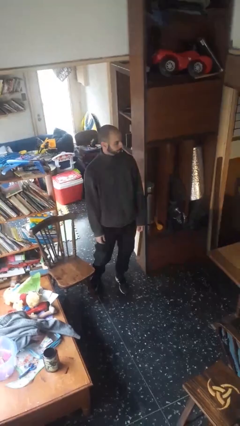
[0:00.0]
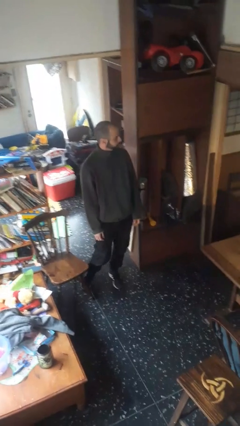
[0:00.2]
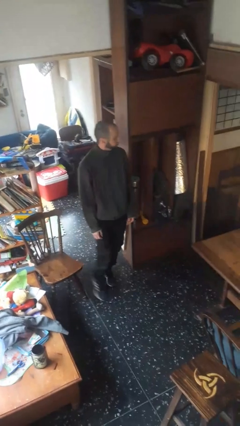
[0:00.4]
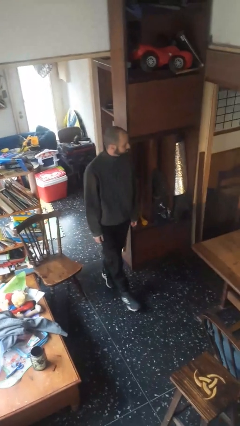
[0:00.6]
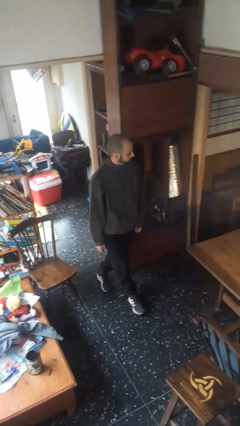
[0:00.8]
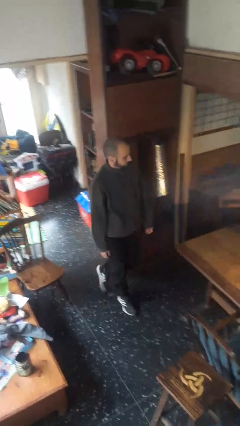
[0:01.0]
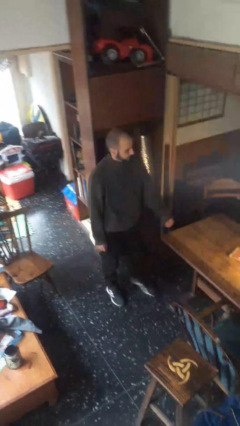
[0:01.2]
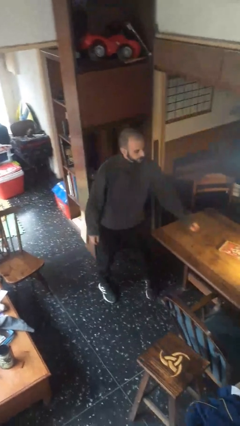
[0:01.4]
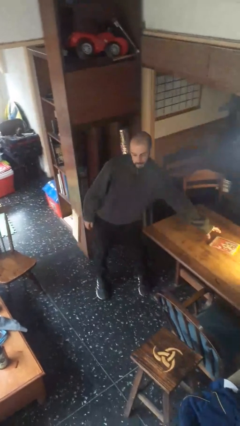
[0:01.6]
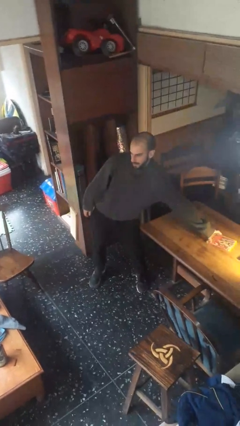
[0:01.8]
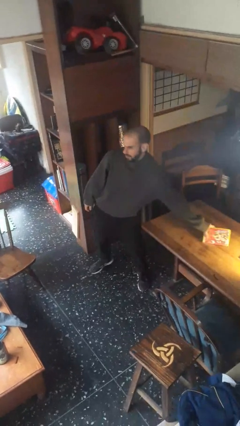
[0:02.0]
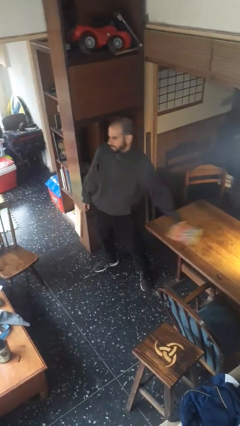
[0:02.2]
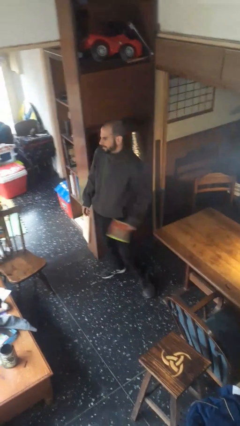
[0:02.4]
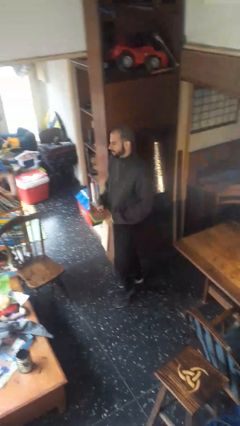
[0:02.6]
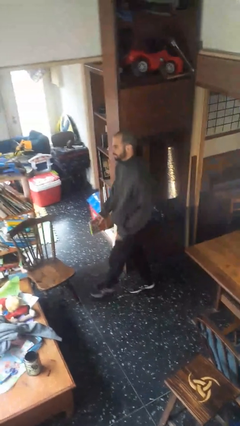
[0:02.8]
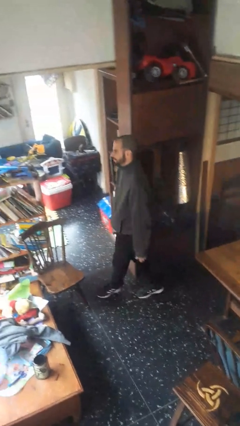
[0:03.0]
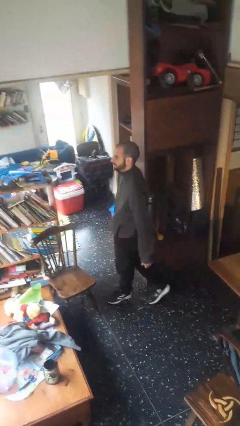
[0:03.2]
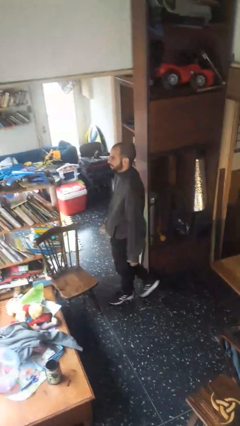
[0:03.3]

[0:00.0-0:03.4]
person picks up object from table

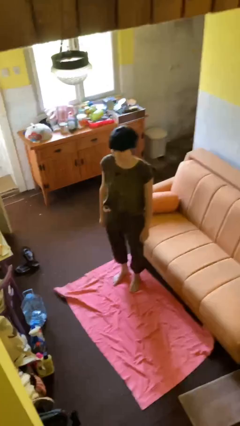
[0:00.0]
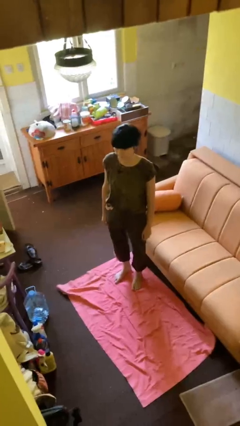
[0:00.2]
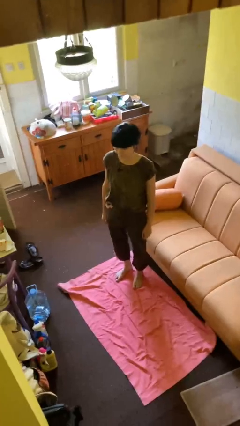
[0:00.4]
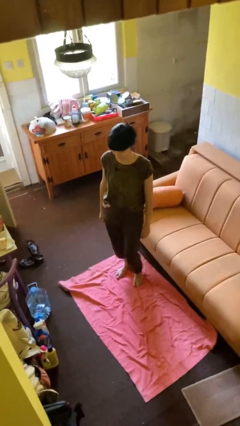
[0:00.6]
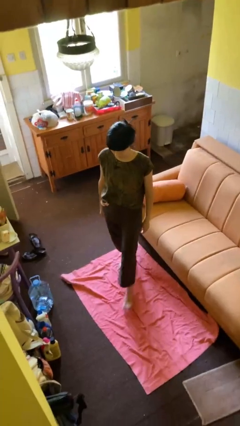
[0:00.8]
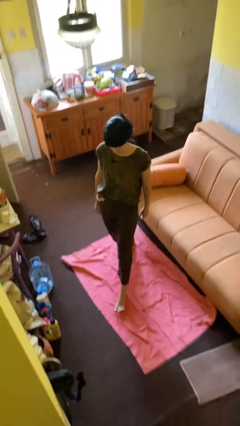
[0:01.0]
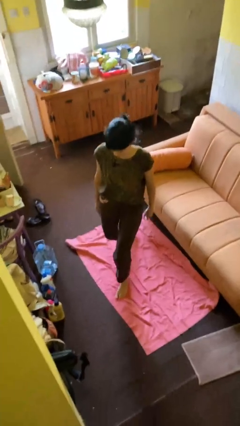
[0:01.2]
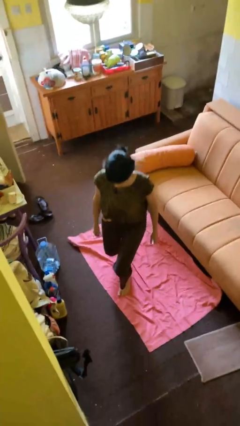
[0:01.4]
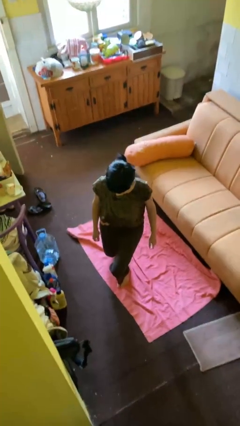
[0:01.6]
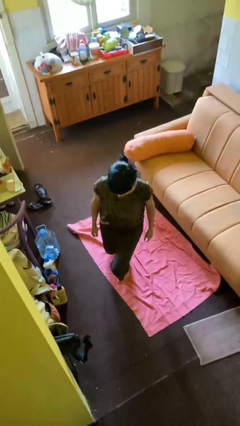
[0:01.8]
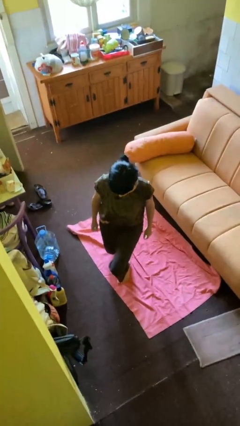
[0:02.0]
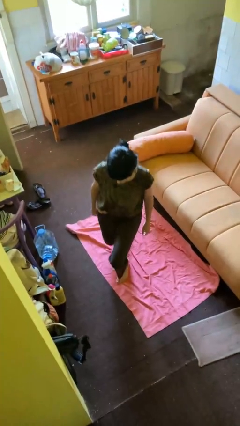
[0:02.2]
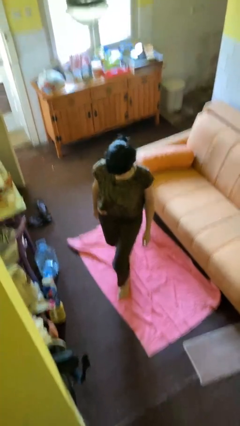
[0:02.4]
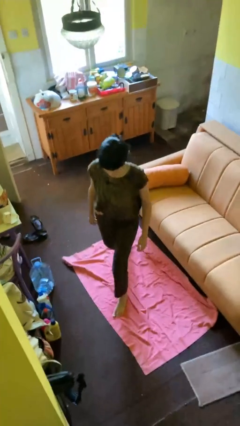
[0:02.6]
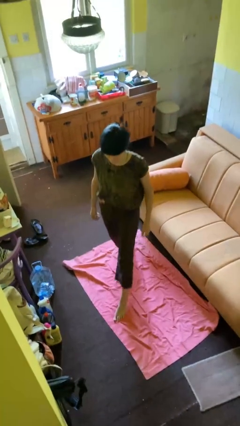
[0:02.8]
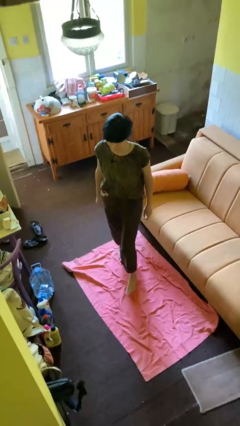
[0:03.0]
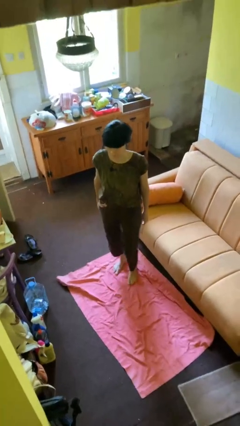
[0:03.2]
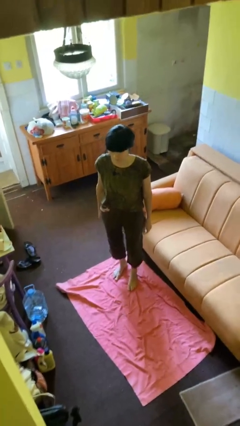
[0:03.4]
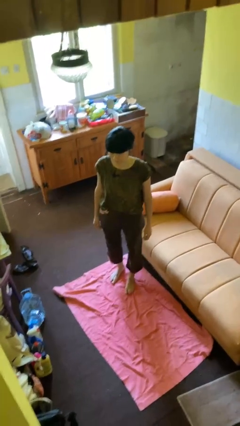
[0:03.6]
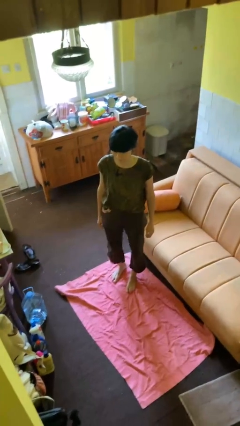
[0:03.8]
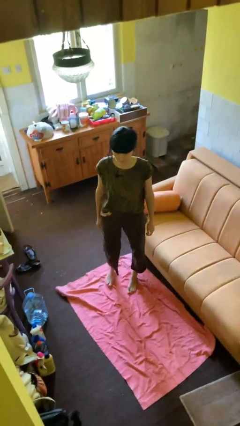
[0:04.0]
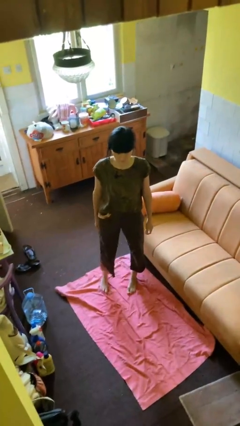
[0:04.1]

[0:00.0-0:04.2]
person exercises with lunges

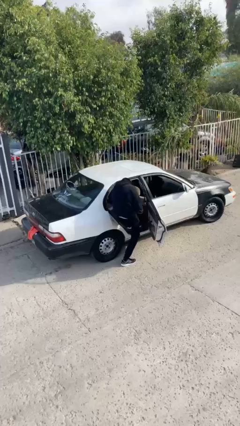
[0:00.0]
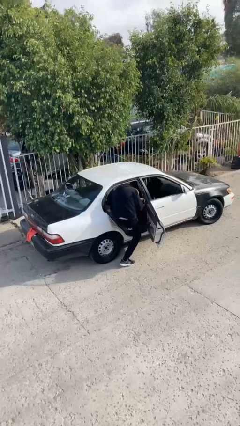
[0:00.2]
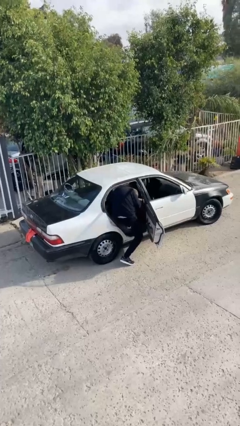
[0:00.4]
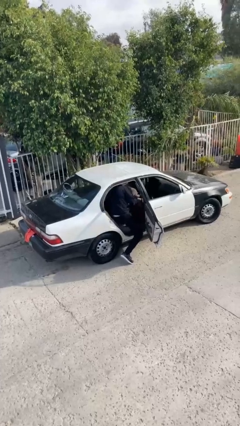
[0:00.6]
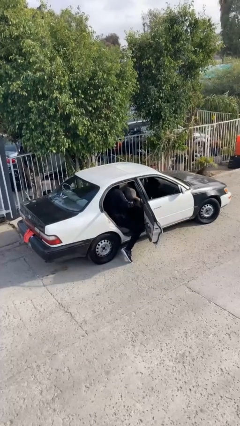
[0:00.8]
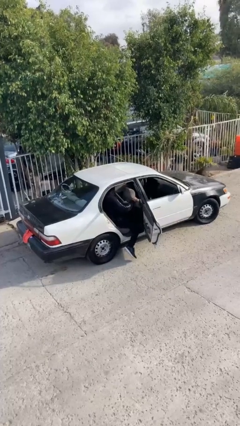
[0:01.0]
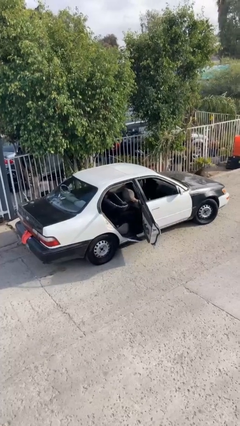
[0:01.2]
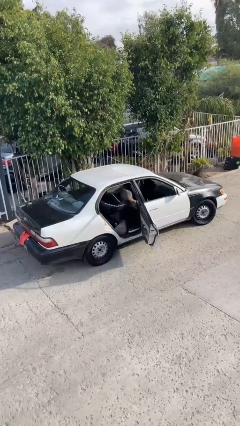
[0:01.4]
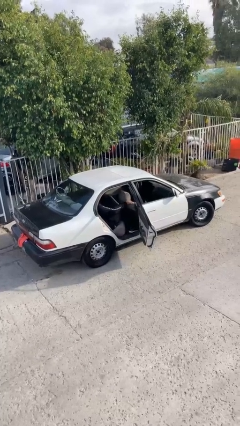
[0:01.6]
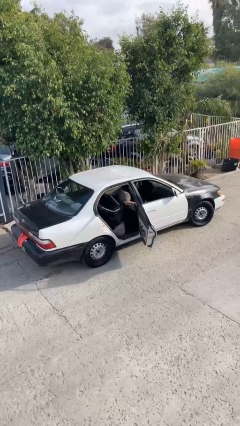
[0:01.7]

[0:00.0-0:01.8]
person enters car

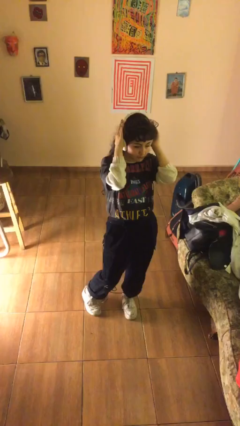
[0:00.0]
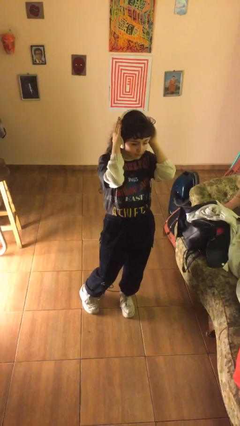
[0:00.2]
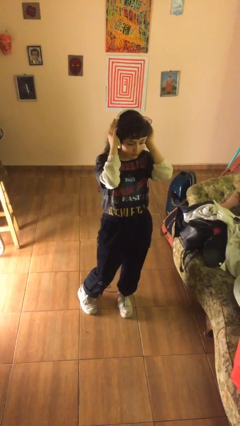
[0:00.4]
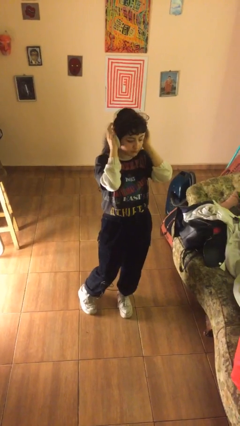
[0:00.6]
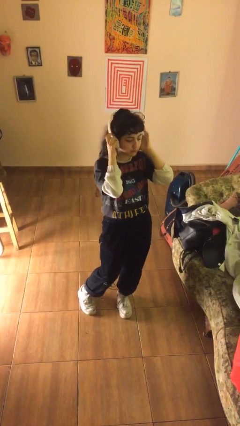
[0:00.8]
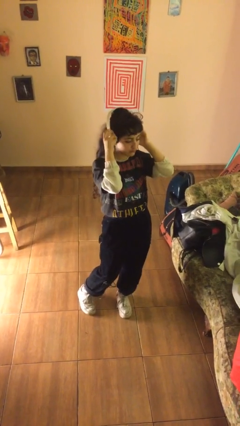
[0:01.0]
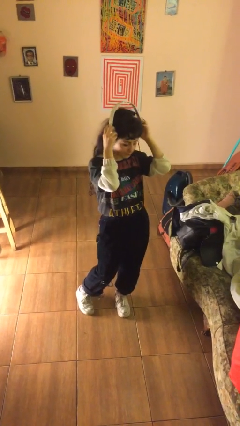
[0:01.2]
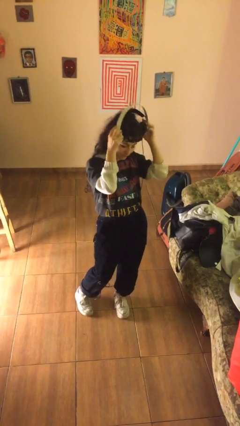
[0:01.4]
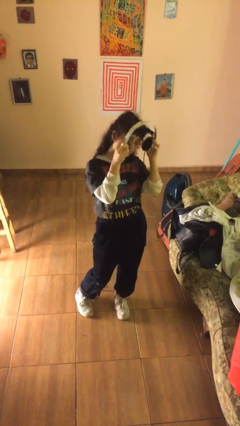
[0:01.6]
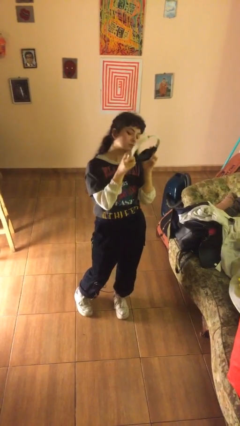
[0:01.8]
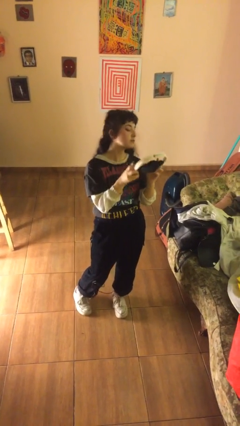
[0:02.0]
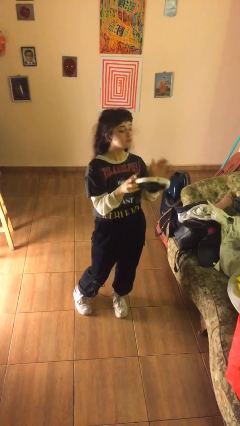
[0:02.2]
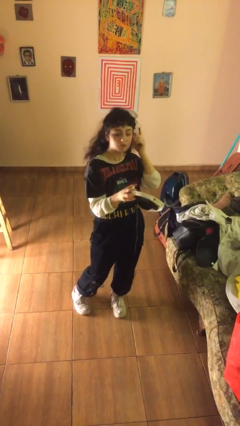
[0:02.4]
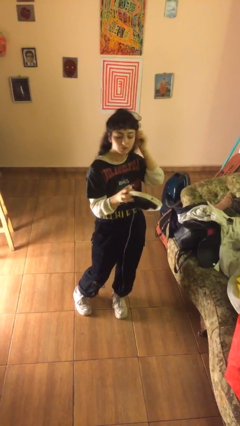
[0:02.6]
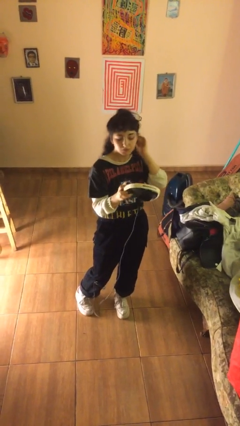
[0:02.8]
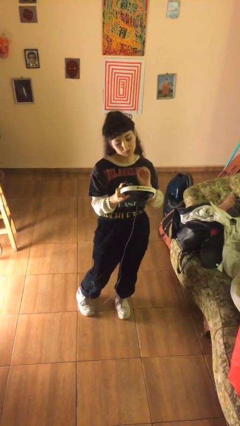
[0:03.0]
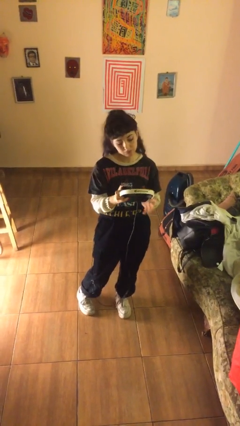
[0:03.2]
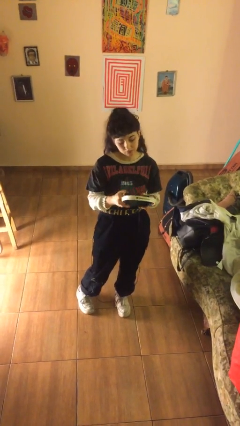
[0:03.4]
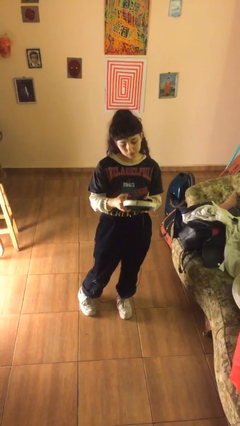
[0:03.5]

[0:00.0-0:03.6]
person takes off headphones

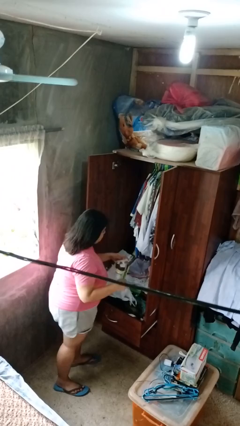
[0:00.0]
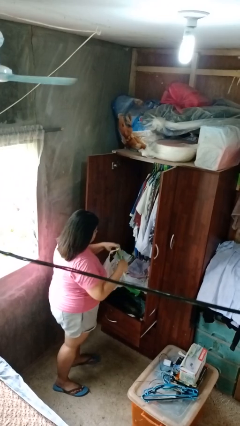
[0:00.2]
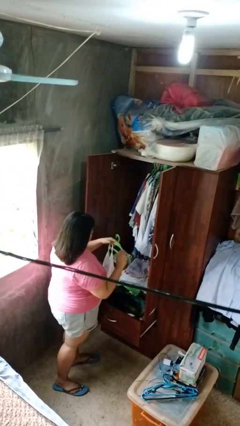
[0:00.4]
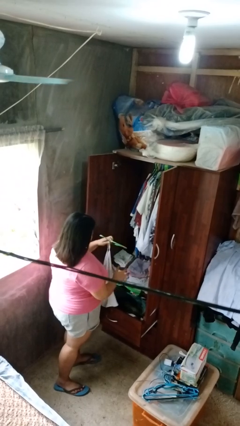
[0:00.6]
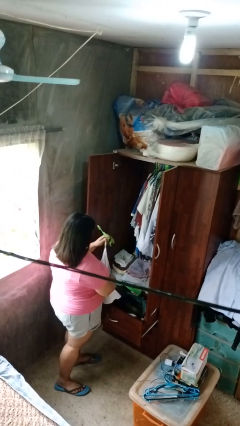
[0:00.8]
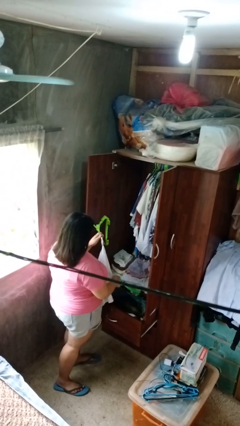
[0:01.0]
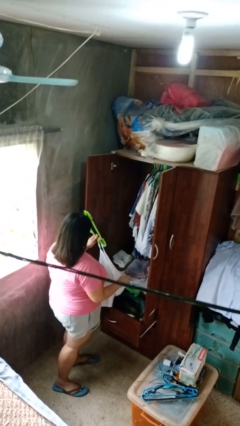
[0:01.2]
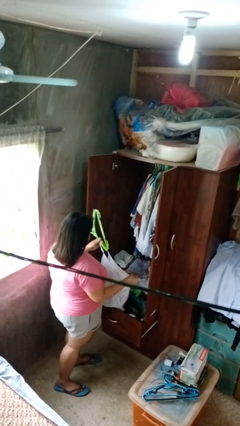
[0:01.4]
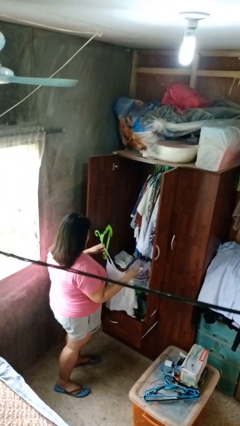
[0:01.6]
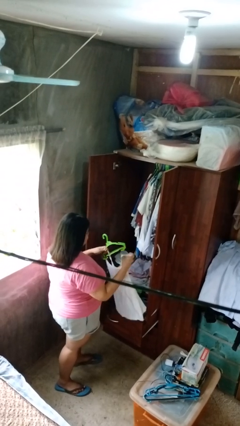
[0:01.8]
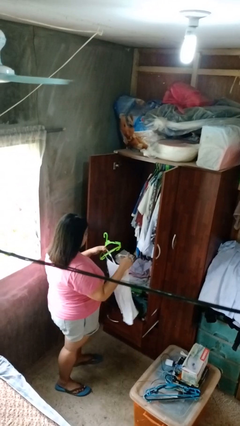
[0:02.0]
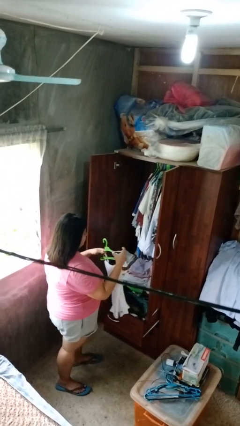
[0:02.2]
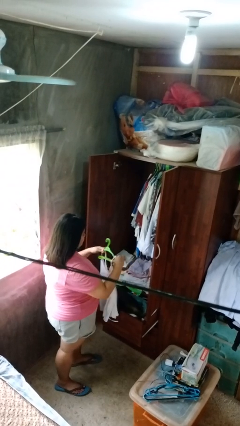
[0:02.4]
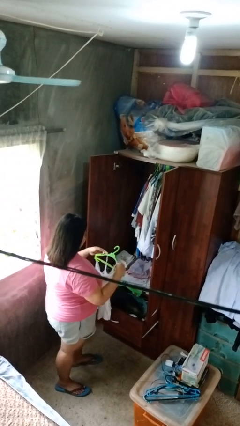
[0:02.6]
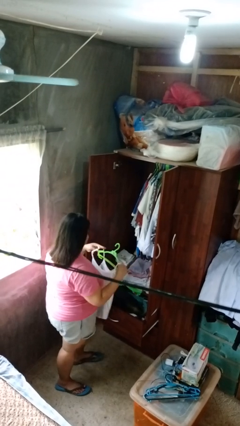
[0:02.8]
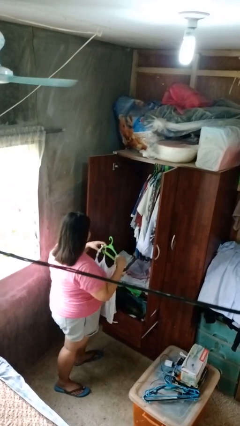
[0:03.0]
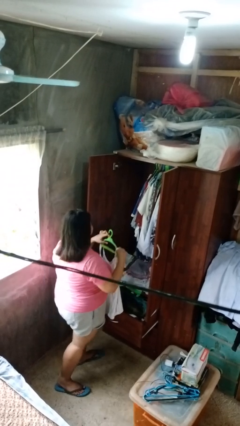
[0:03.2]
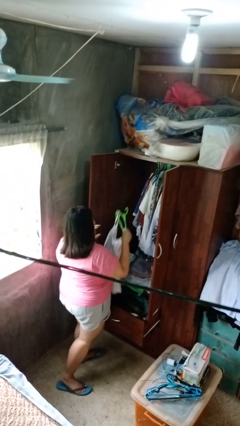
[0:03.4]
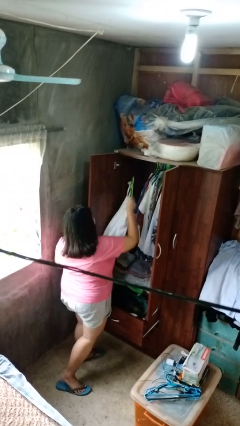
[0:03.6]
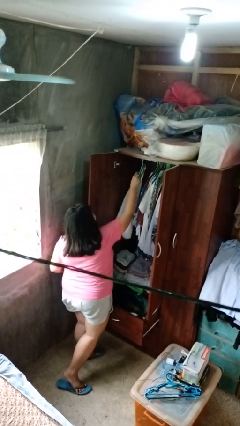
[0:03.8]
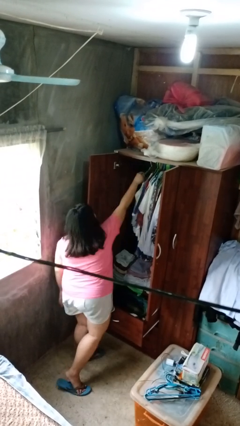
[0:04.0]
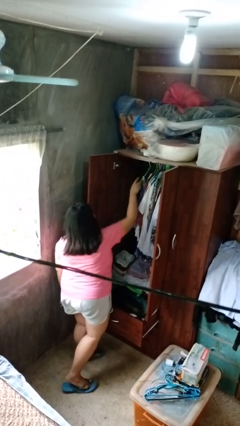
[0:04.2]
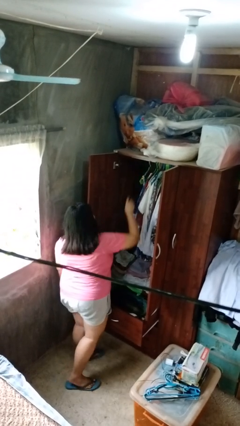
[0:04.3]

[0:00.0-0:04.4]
person puts clothes into closet

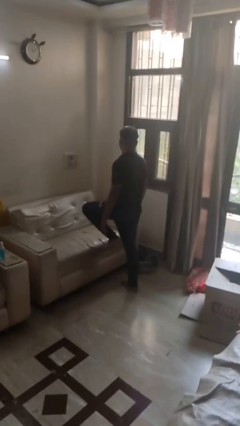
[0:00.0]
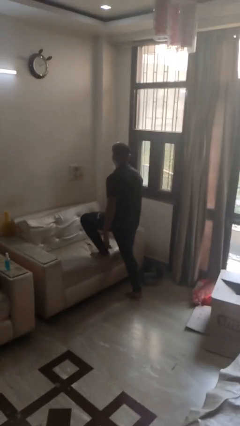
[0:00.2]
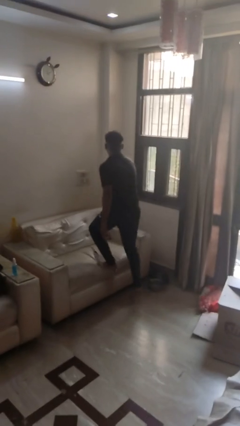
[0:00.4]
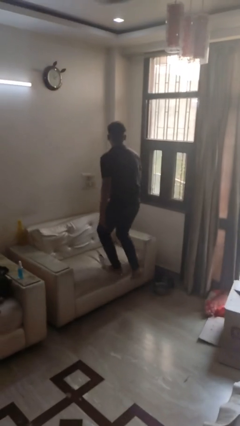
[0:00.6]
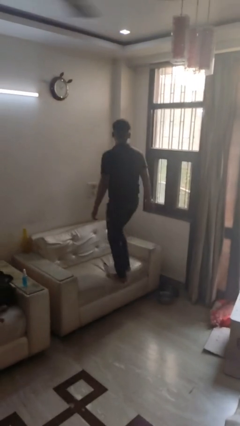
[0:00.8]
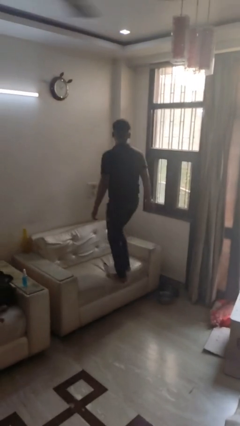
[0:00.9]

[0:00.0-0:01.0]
person climbs on couch
